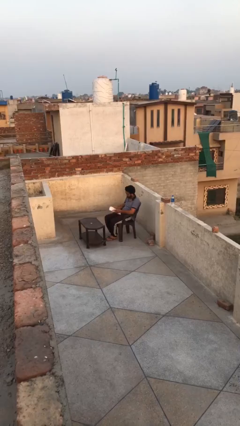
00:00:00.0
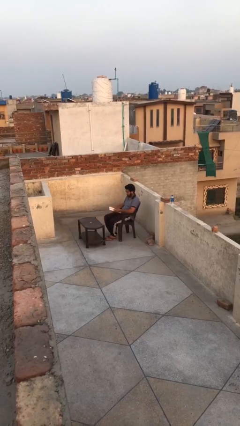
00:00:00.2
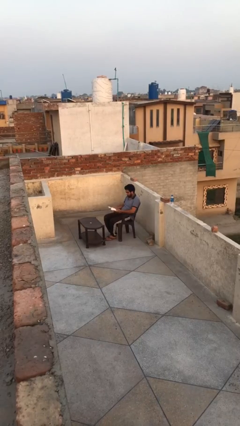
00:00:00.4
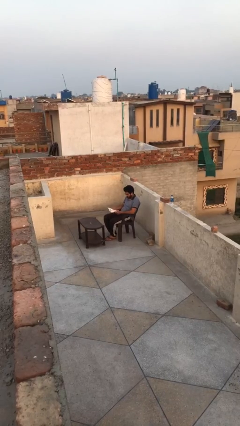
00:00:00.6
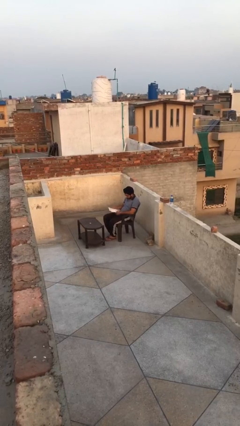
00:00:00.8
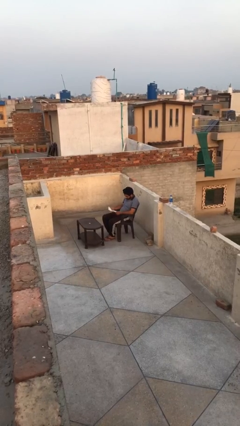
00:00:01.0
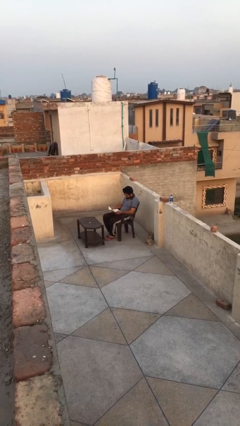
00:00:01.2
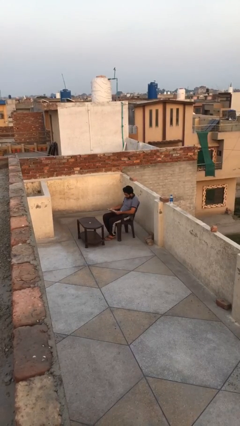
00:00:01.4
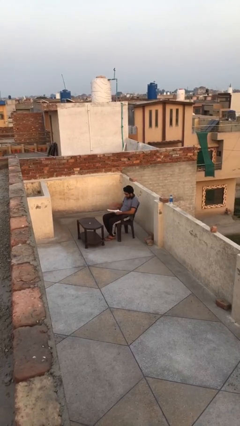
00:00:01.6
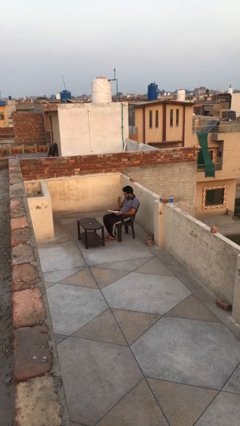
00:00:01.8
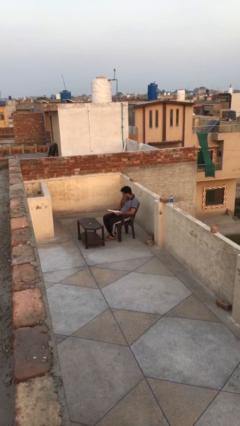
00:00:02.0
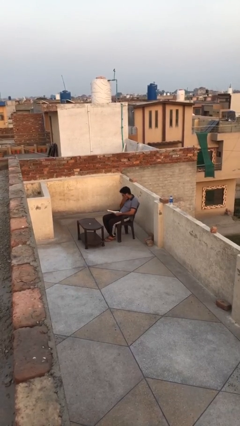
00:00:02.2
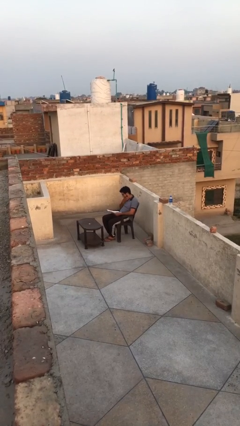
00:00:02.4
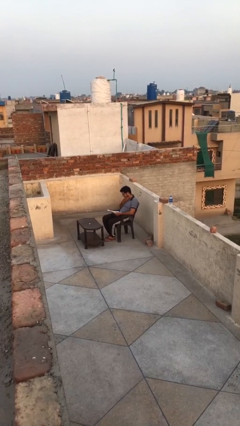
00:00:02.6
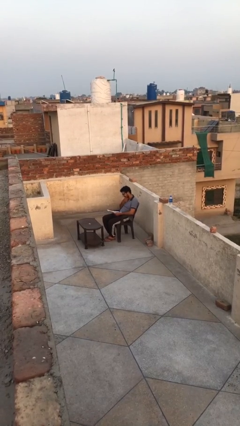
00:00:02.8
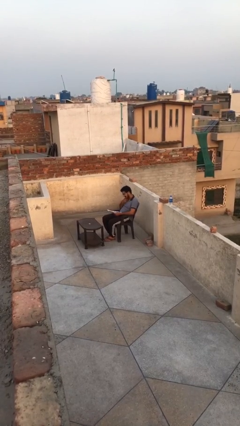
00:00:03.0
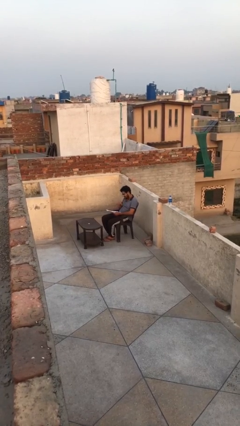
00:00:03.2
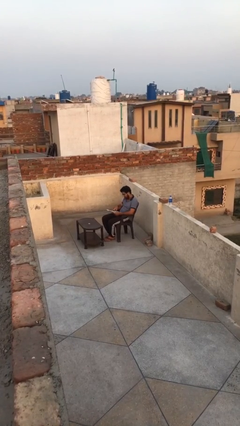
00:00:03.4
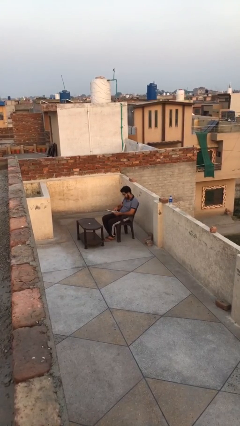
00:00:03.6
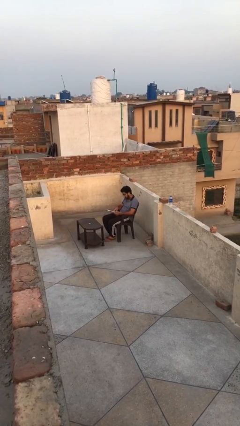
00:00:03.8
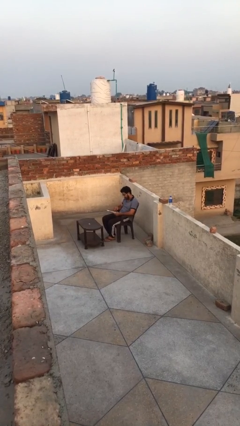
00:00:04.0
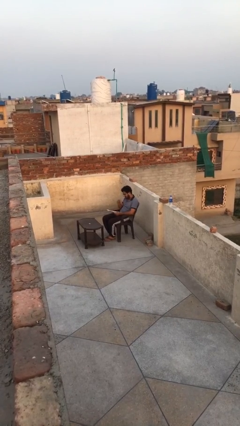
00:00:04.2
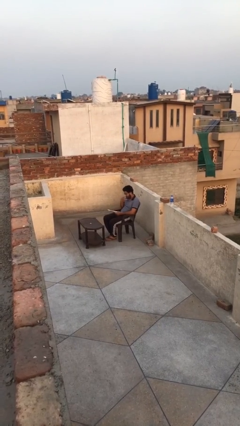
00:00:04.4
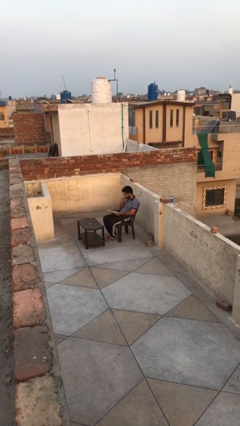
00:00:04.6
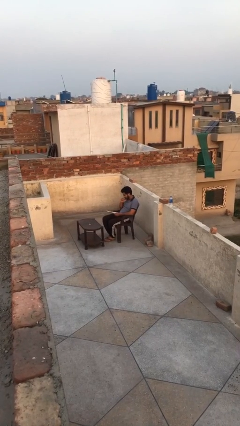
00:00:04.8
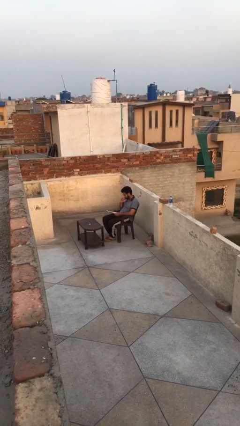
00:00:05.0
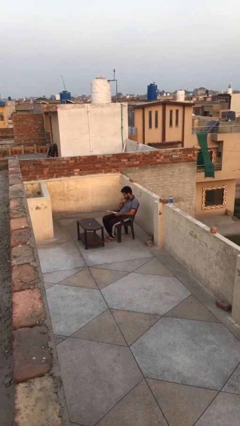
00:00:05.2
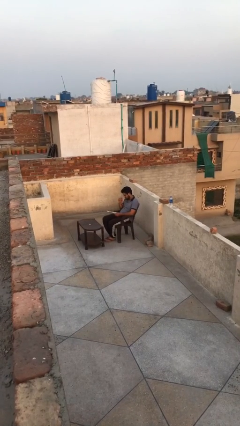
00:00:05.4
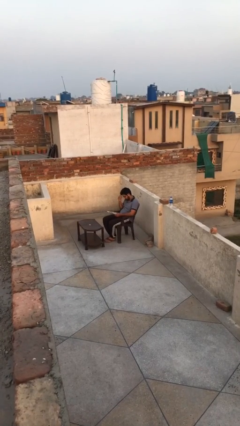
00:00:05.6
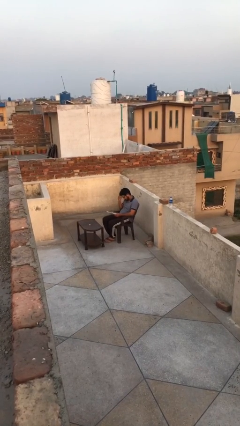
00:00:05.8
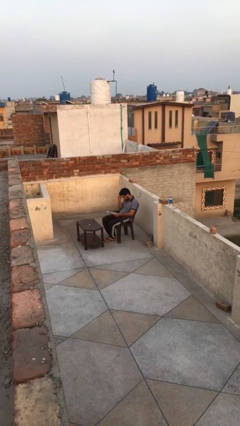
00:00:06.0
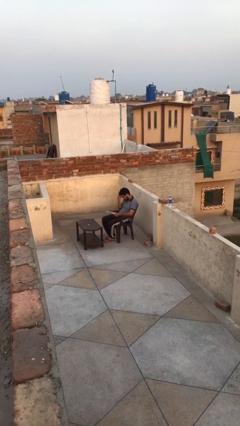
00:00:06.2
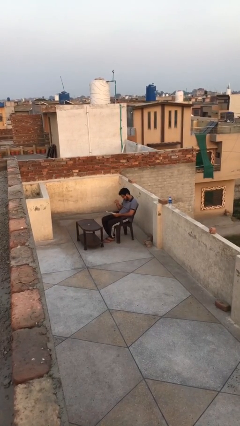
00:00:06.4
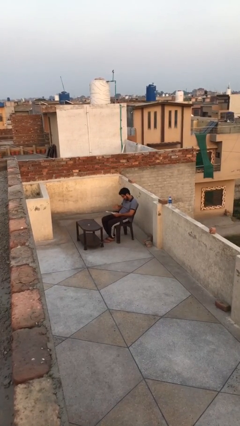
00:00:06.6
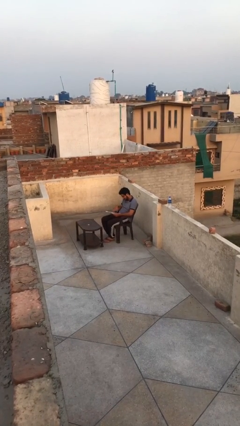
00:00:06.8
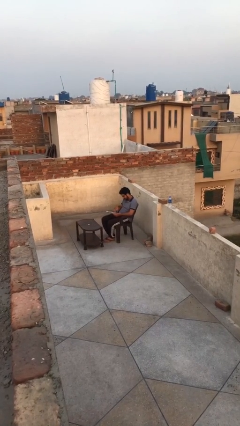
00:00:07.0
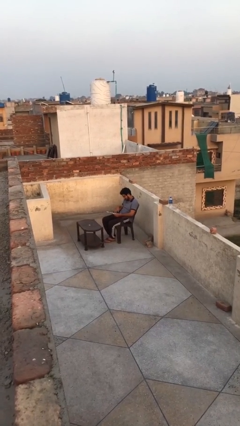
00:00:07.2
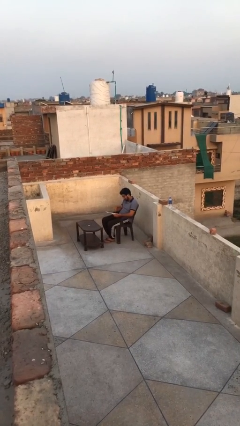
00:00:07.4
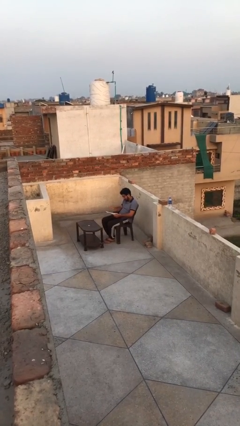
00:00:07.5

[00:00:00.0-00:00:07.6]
person reads document

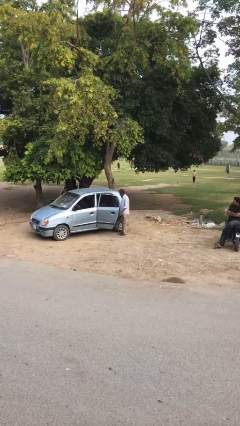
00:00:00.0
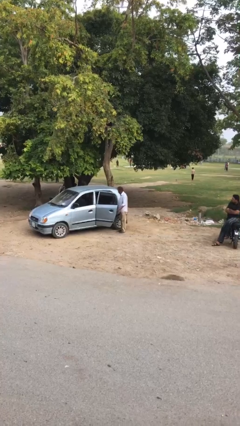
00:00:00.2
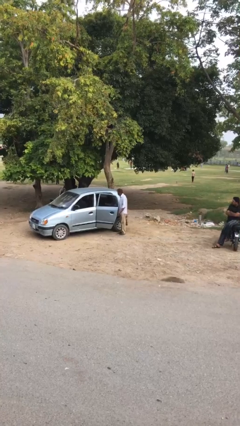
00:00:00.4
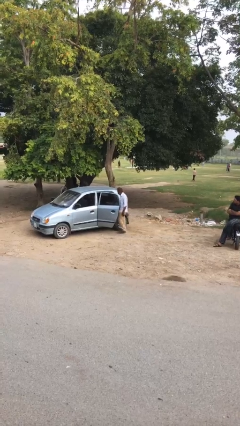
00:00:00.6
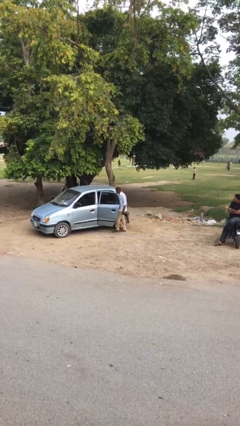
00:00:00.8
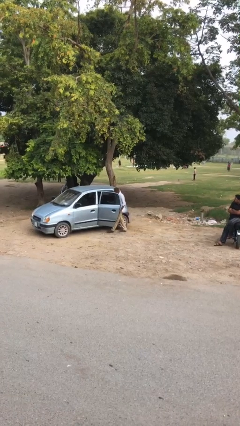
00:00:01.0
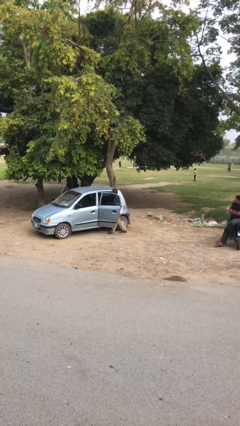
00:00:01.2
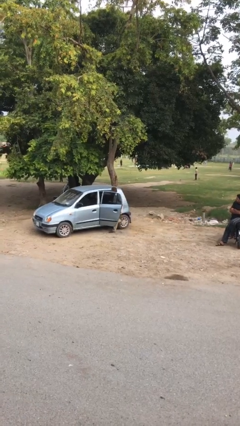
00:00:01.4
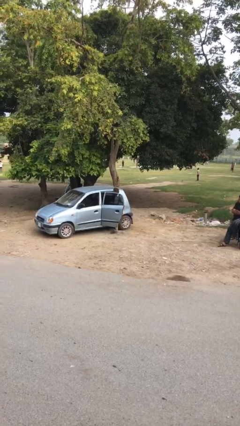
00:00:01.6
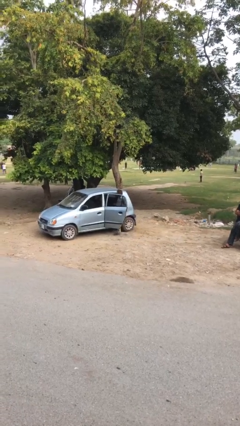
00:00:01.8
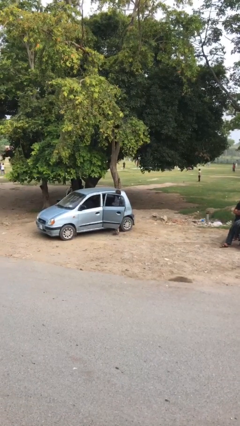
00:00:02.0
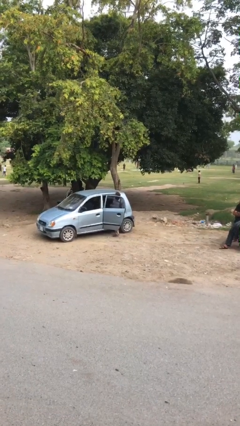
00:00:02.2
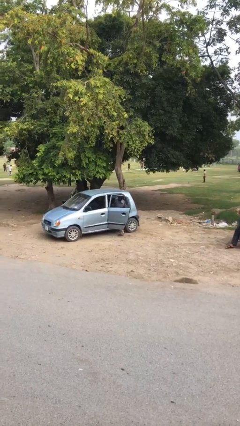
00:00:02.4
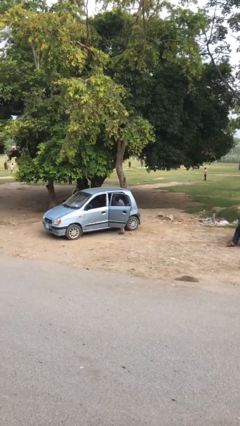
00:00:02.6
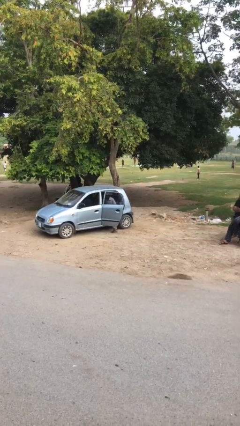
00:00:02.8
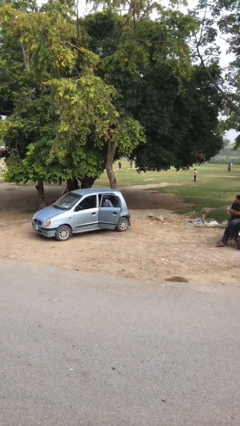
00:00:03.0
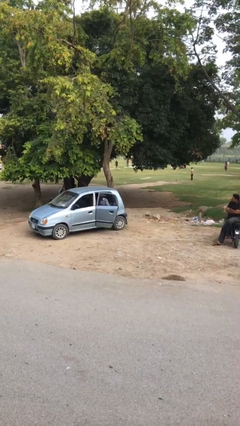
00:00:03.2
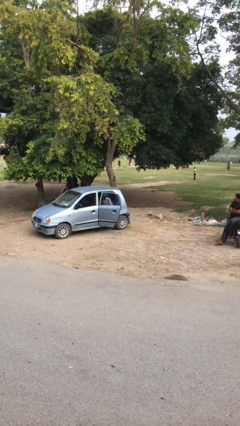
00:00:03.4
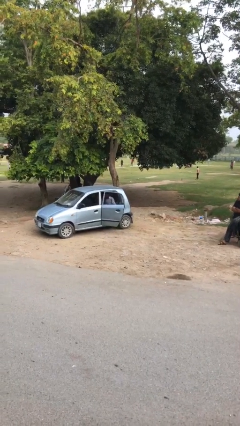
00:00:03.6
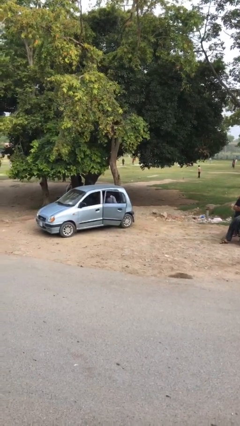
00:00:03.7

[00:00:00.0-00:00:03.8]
person enters car

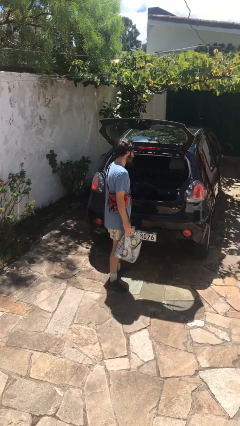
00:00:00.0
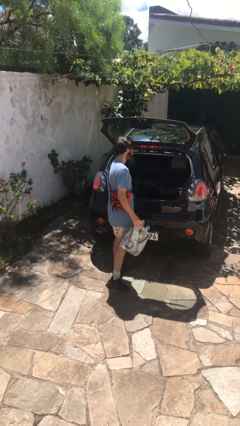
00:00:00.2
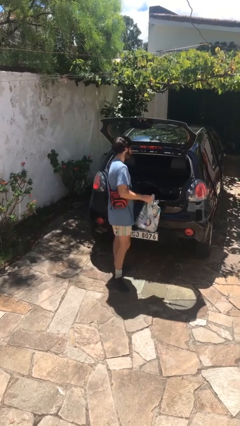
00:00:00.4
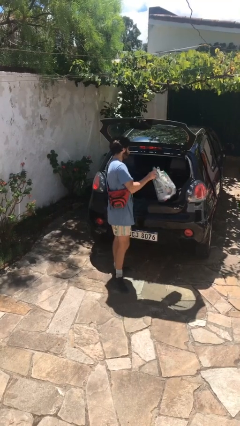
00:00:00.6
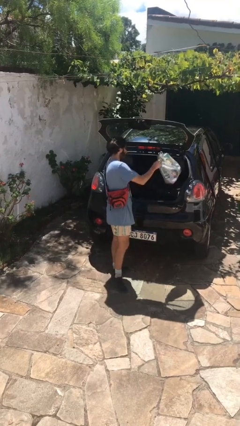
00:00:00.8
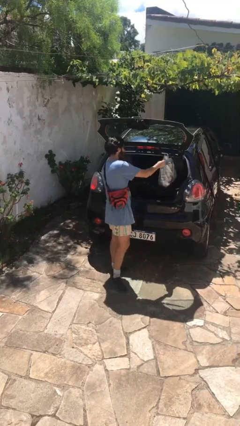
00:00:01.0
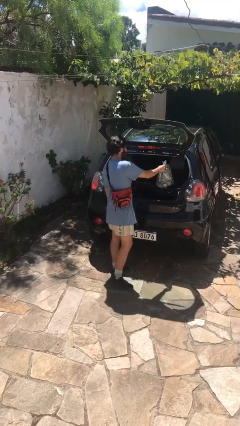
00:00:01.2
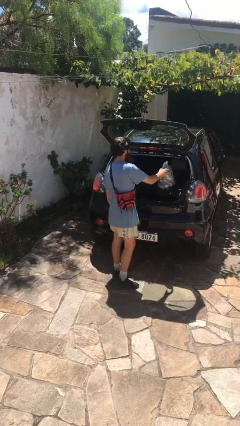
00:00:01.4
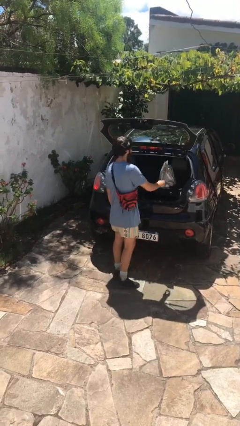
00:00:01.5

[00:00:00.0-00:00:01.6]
person loads car

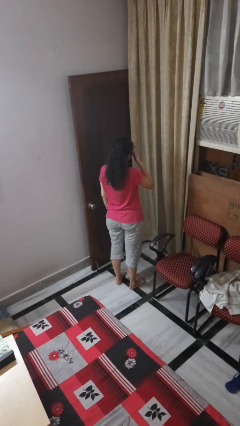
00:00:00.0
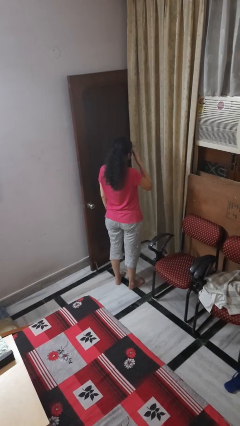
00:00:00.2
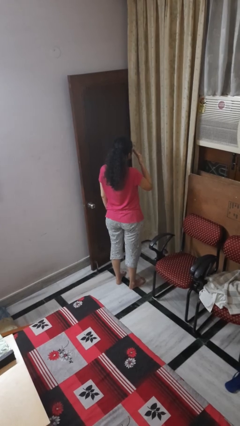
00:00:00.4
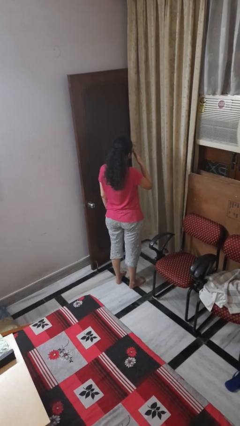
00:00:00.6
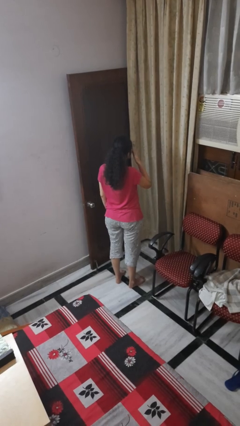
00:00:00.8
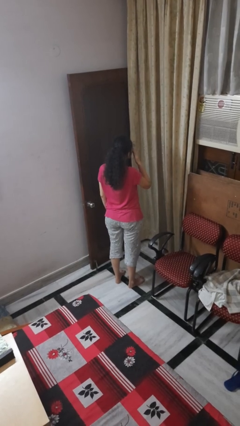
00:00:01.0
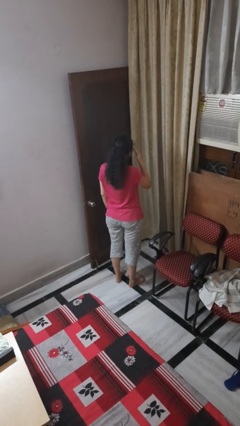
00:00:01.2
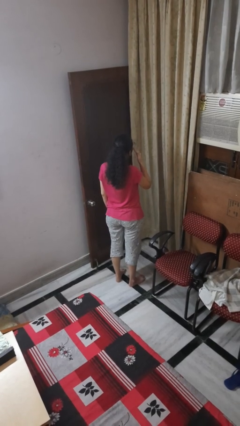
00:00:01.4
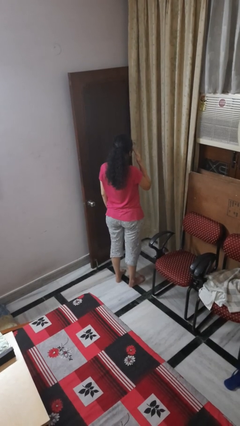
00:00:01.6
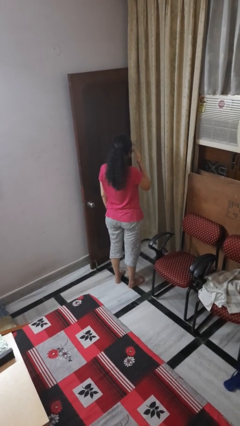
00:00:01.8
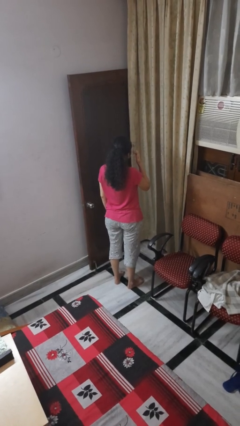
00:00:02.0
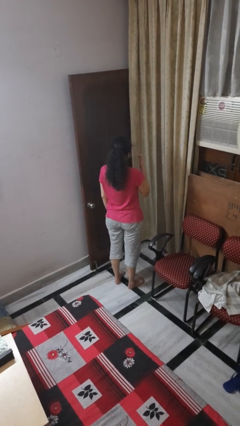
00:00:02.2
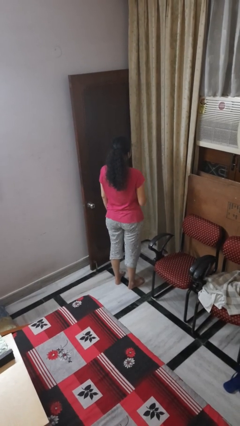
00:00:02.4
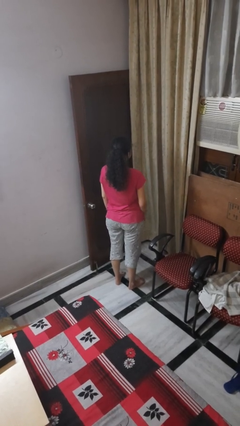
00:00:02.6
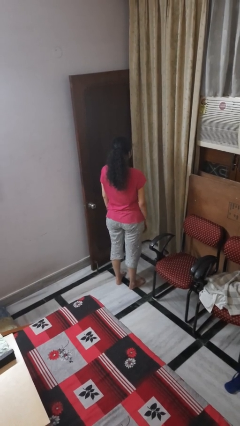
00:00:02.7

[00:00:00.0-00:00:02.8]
person rubs eyes

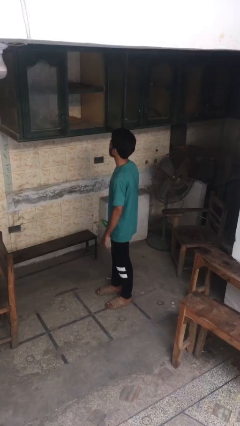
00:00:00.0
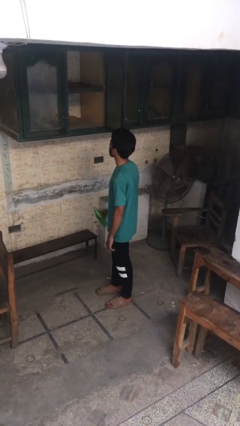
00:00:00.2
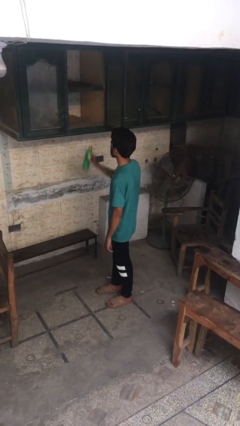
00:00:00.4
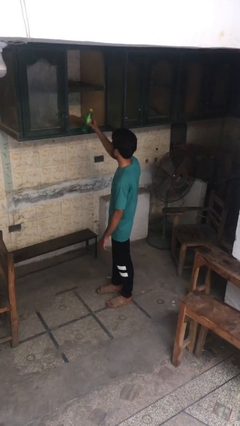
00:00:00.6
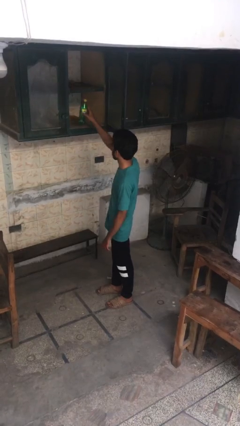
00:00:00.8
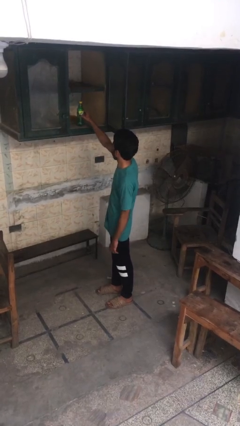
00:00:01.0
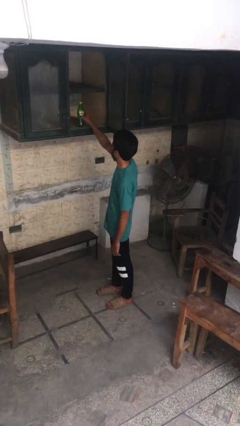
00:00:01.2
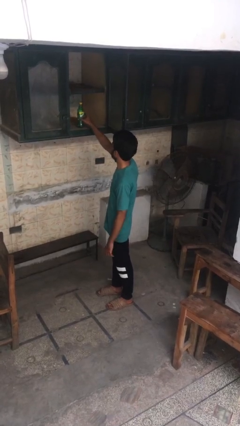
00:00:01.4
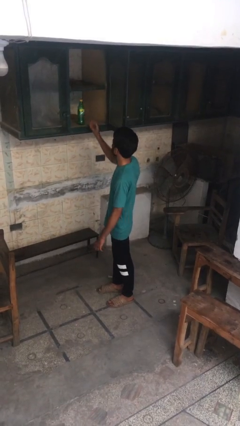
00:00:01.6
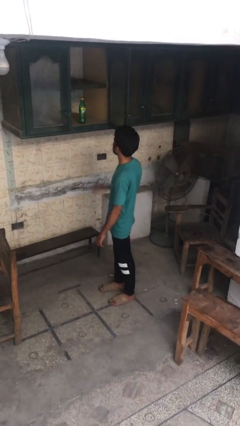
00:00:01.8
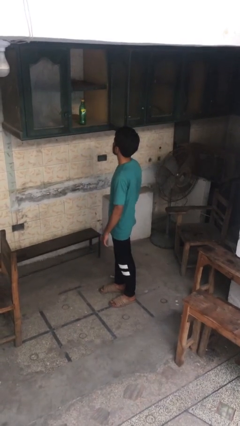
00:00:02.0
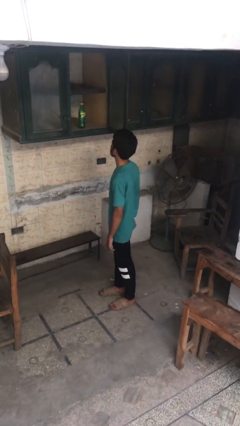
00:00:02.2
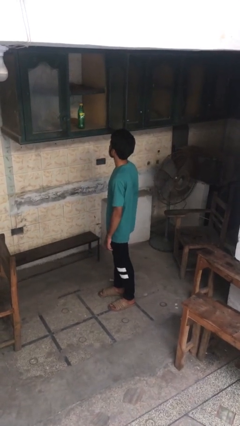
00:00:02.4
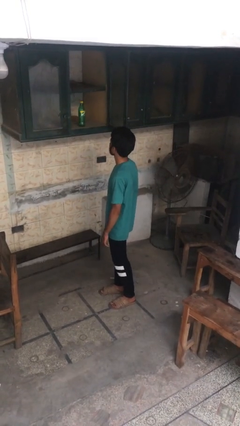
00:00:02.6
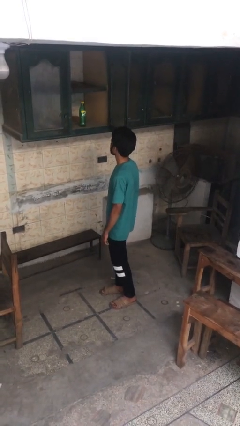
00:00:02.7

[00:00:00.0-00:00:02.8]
person puts object in cabinet
